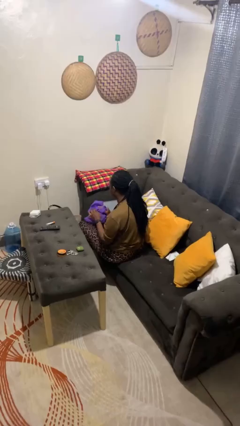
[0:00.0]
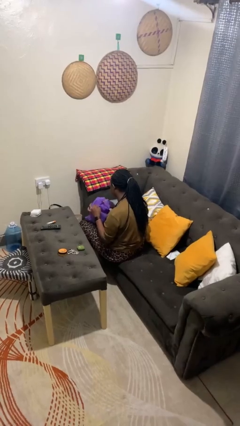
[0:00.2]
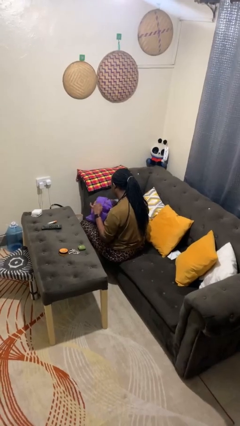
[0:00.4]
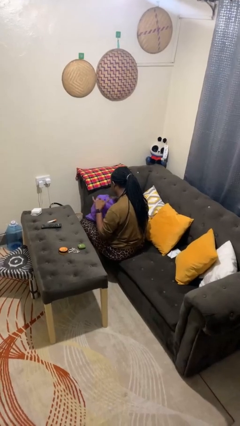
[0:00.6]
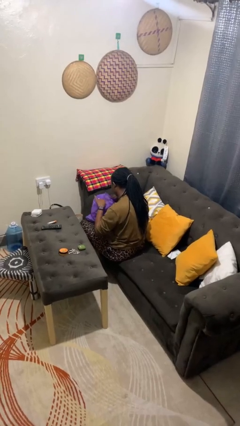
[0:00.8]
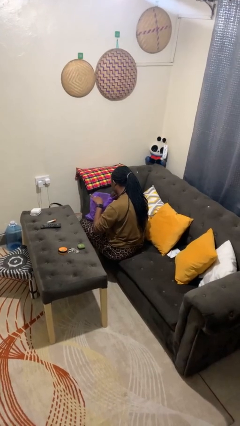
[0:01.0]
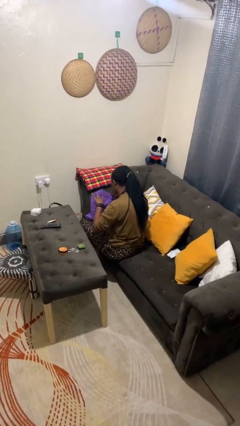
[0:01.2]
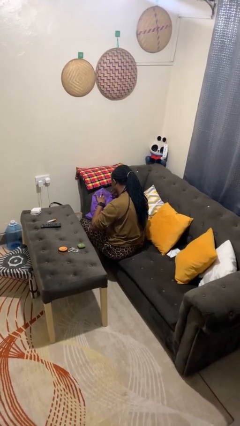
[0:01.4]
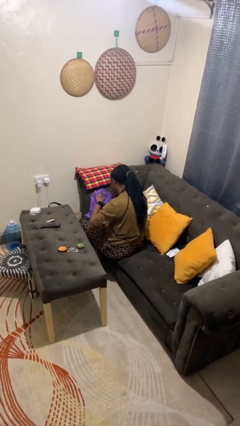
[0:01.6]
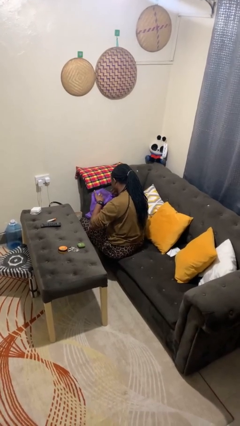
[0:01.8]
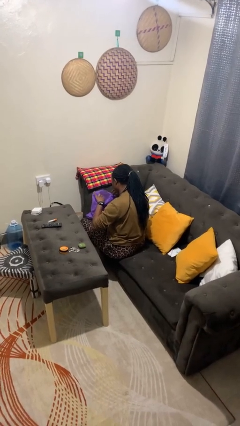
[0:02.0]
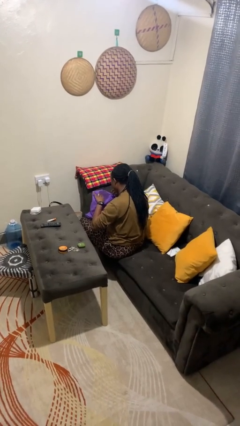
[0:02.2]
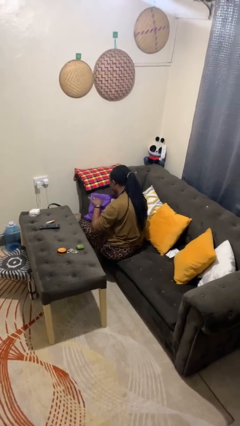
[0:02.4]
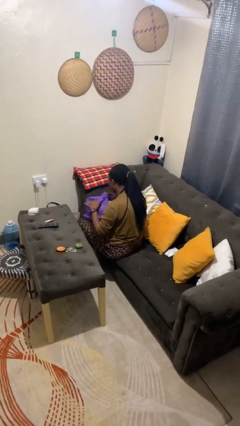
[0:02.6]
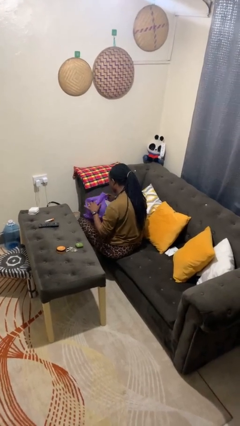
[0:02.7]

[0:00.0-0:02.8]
person searches in bag

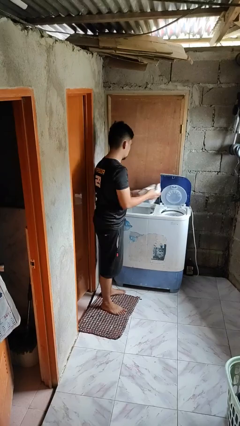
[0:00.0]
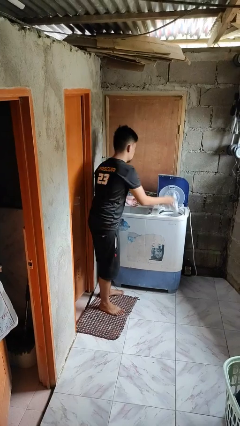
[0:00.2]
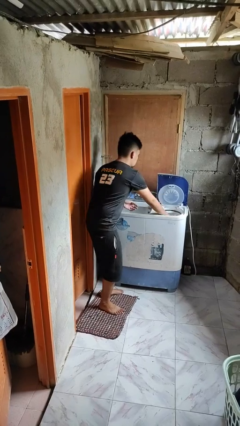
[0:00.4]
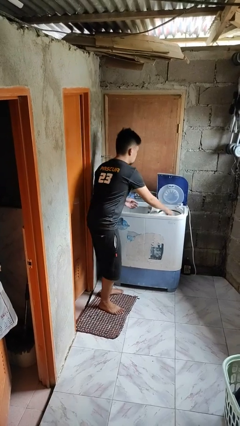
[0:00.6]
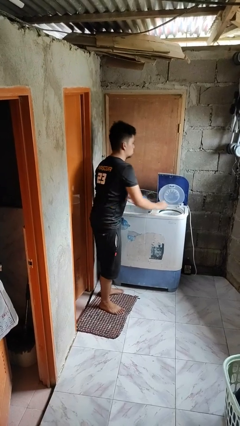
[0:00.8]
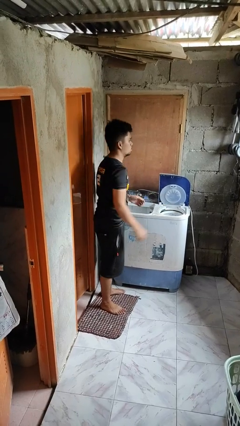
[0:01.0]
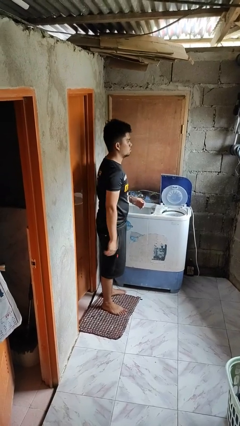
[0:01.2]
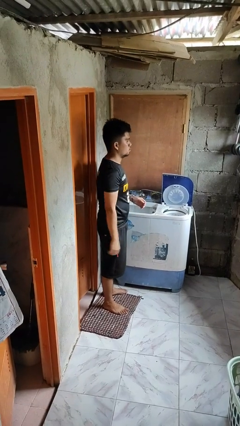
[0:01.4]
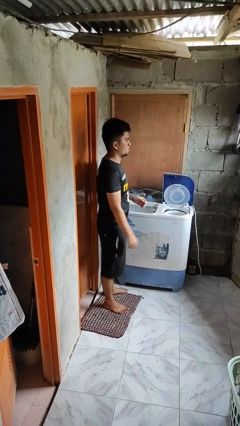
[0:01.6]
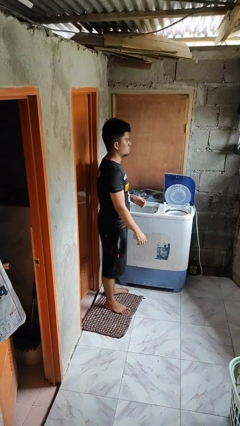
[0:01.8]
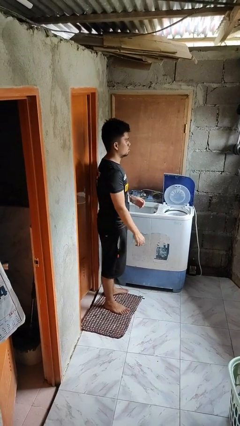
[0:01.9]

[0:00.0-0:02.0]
person loads dryer

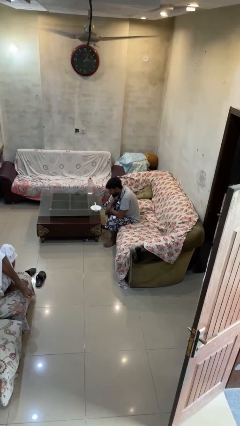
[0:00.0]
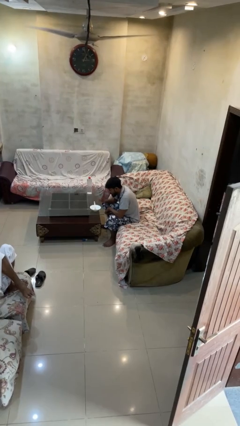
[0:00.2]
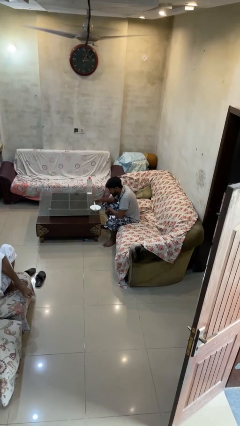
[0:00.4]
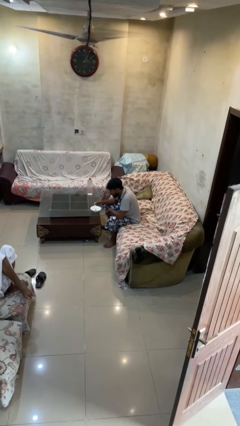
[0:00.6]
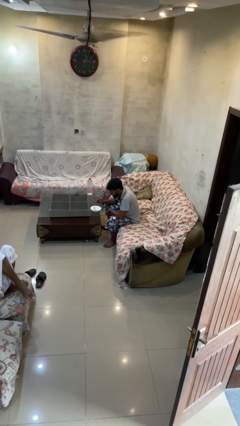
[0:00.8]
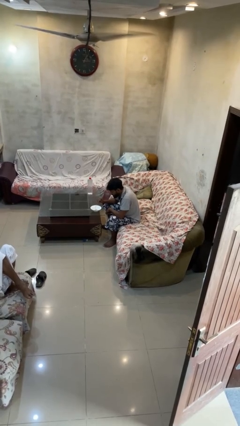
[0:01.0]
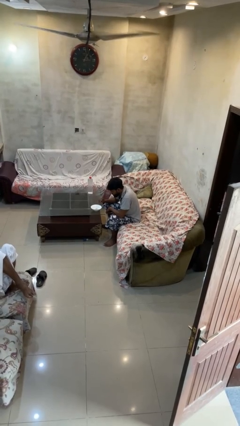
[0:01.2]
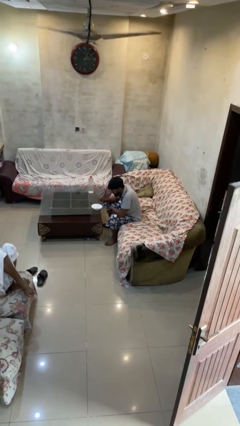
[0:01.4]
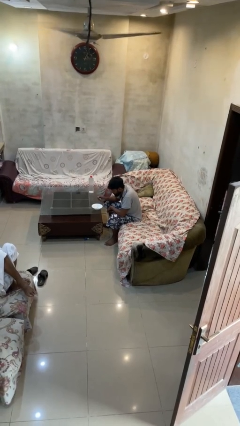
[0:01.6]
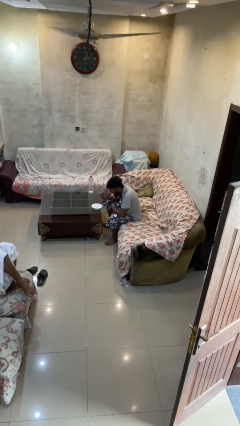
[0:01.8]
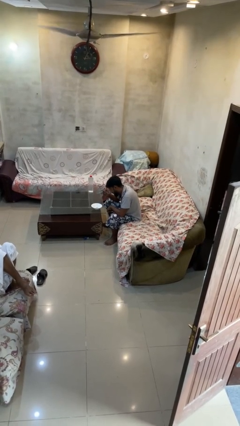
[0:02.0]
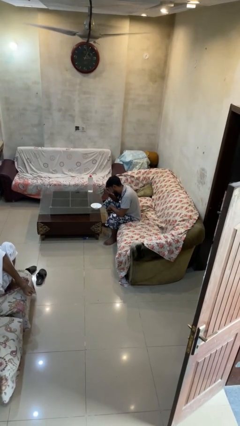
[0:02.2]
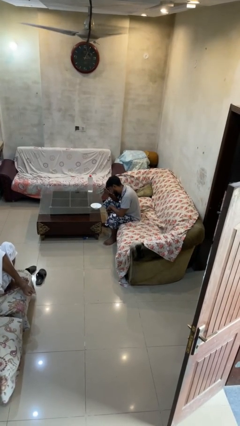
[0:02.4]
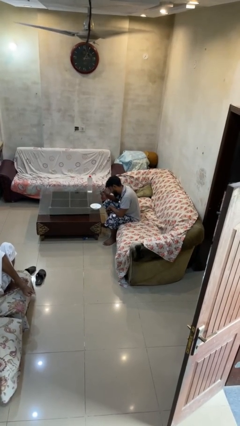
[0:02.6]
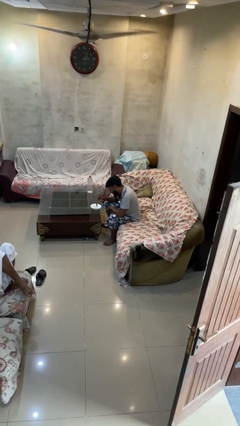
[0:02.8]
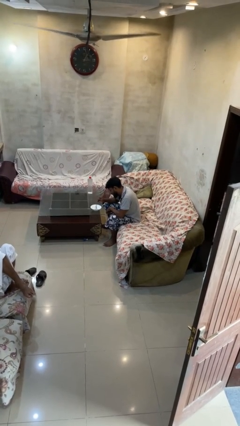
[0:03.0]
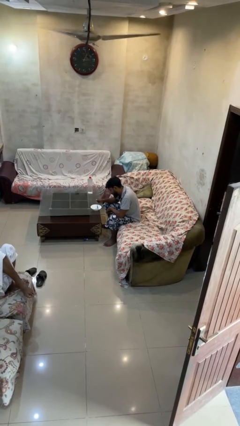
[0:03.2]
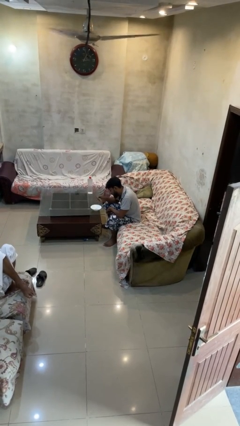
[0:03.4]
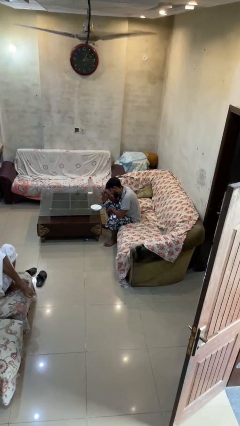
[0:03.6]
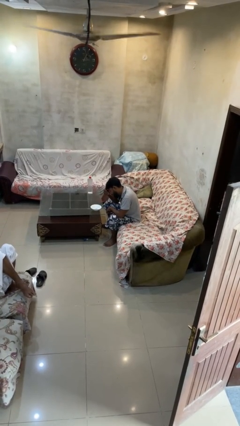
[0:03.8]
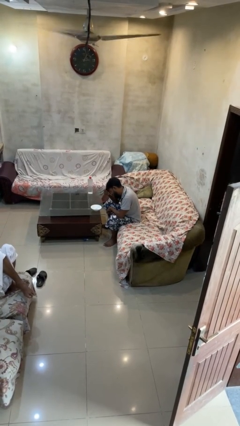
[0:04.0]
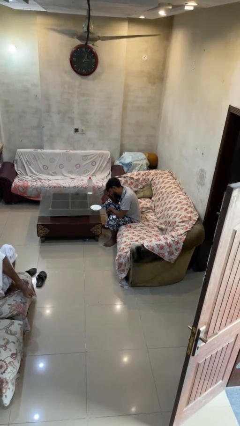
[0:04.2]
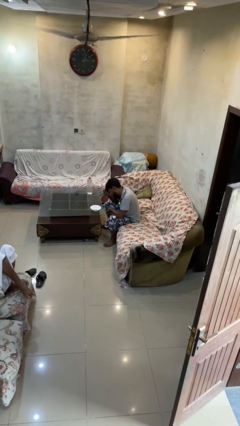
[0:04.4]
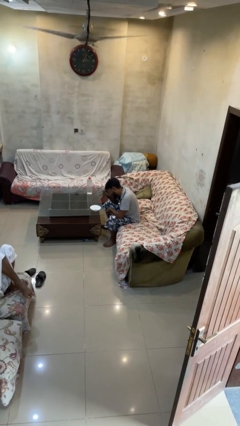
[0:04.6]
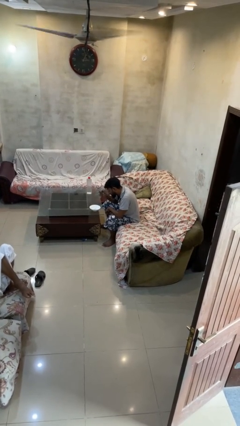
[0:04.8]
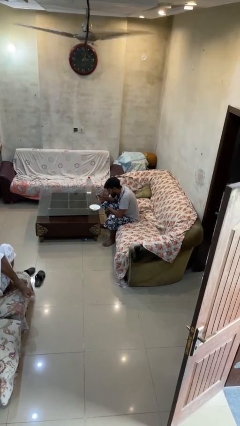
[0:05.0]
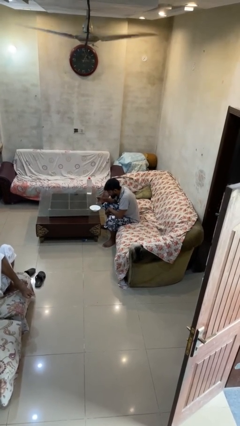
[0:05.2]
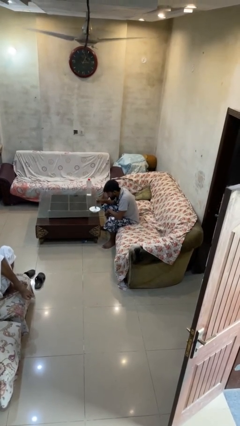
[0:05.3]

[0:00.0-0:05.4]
person eats with utensil

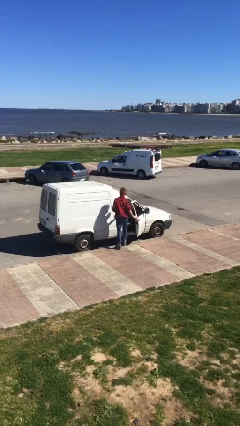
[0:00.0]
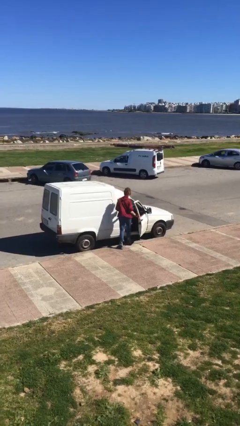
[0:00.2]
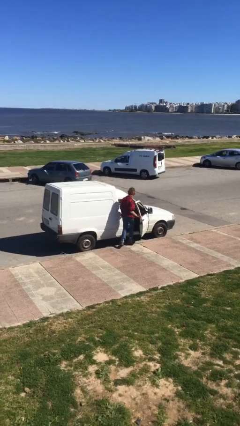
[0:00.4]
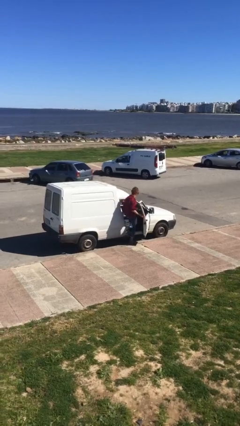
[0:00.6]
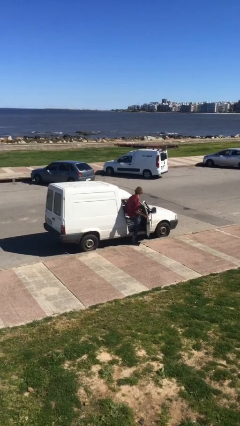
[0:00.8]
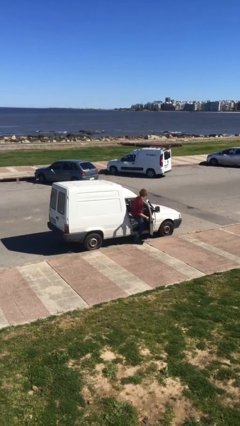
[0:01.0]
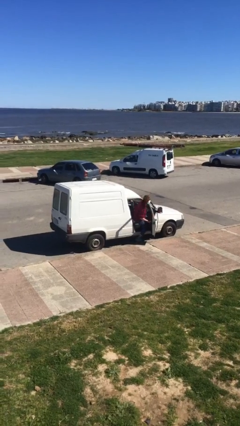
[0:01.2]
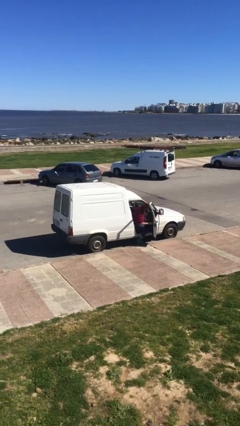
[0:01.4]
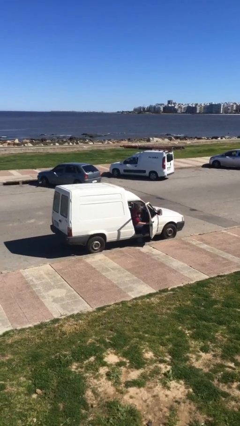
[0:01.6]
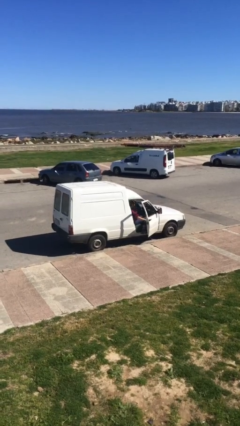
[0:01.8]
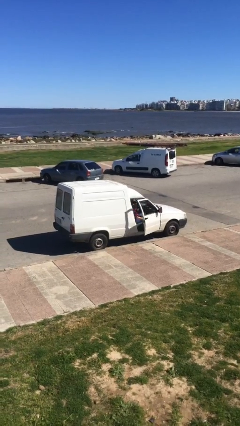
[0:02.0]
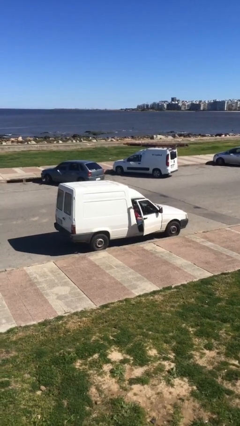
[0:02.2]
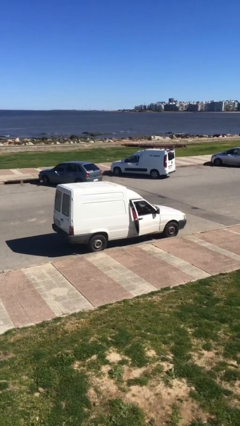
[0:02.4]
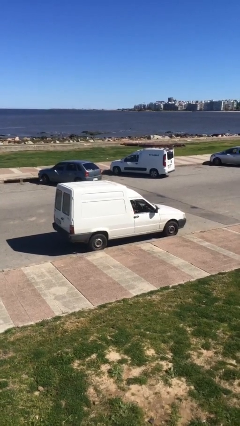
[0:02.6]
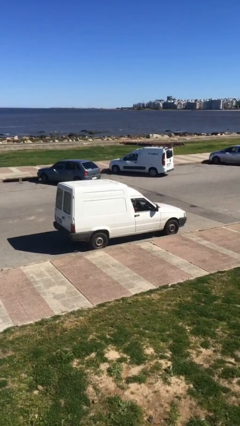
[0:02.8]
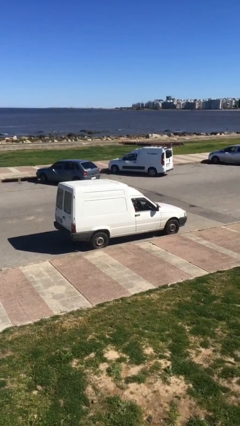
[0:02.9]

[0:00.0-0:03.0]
car picks up person

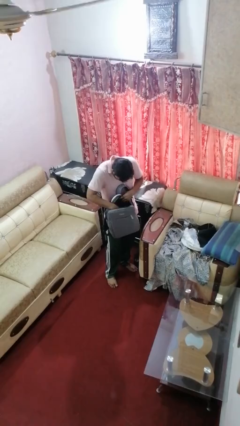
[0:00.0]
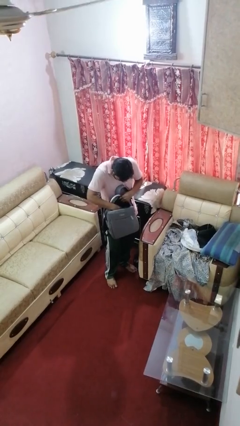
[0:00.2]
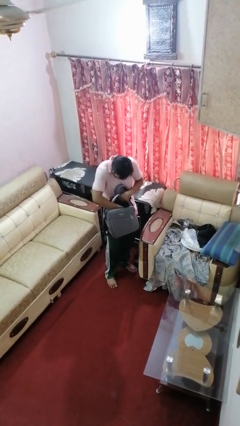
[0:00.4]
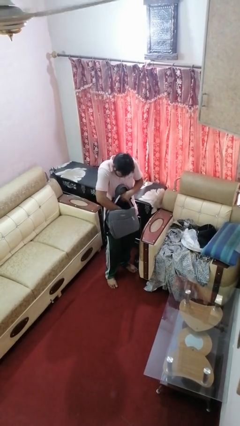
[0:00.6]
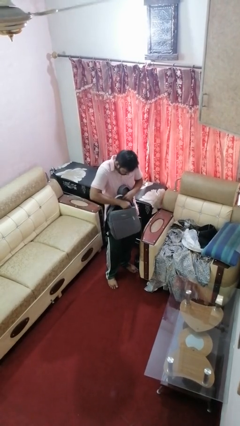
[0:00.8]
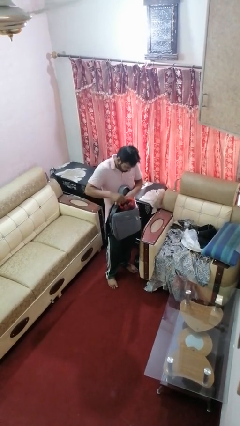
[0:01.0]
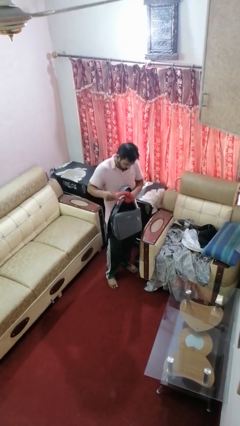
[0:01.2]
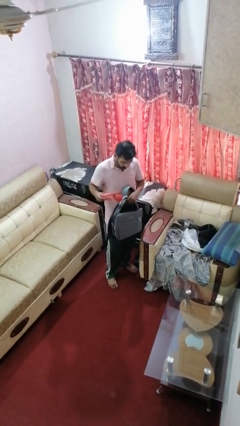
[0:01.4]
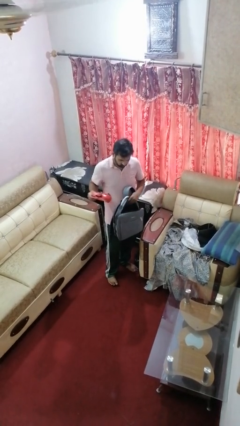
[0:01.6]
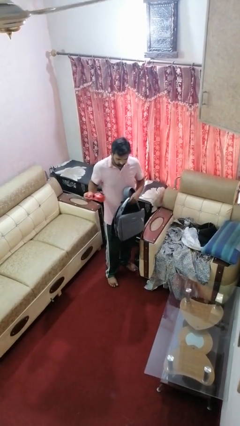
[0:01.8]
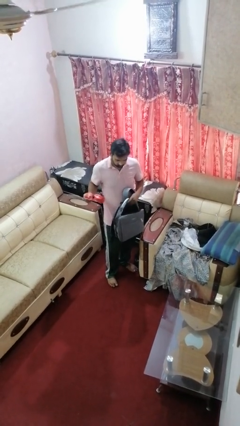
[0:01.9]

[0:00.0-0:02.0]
person takes object from backpack

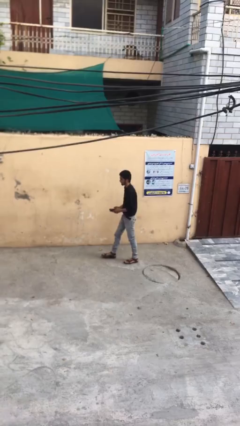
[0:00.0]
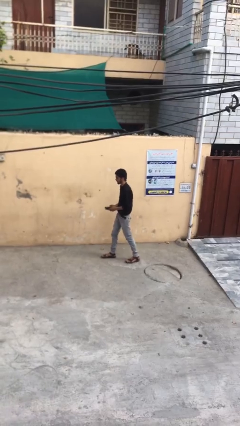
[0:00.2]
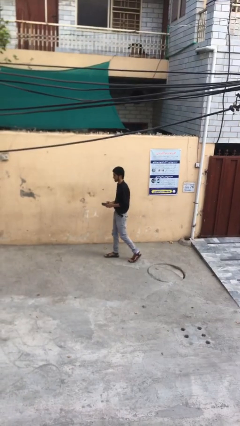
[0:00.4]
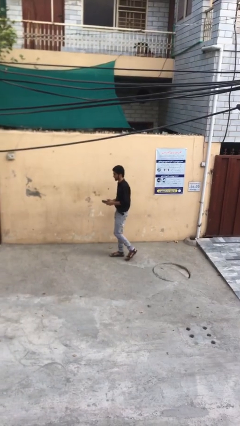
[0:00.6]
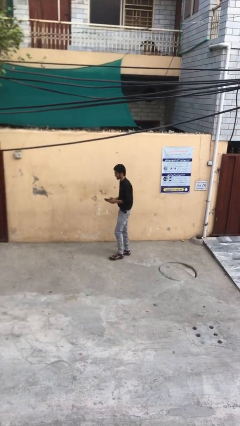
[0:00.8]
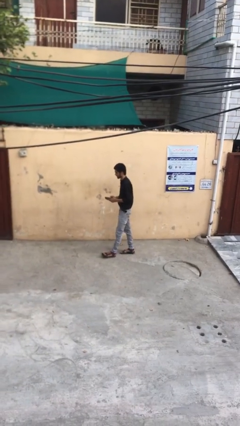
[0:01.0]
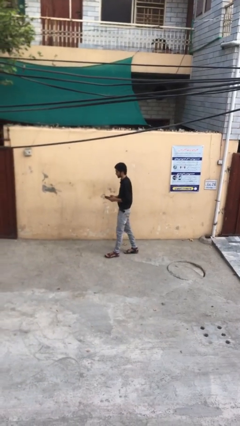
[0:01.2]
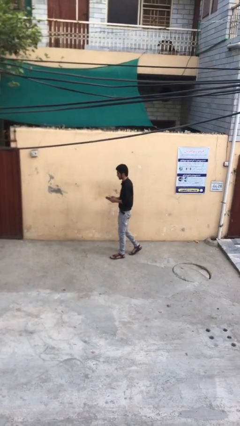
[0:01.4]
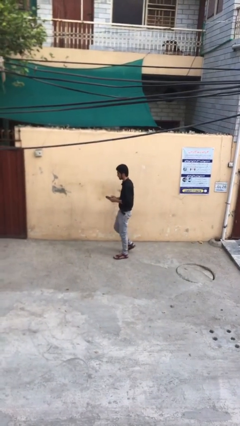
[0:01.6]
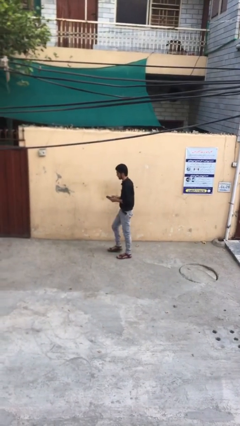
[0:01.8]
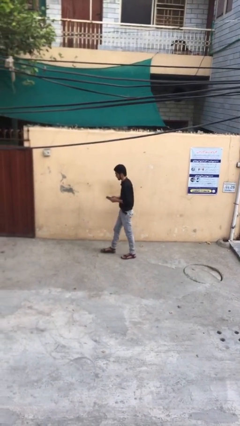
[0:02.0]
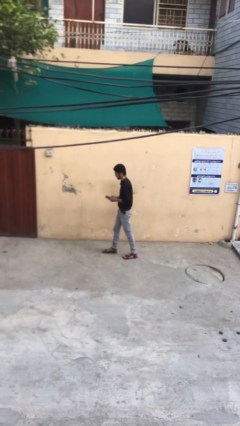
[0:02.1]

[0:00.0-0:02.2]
person texts on phone
